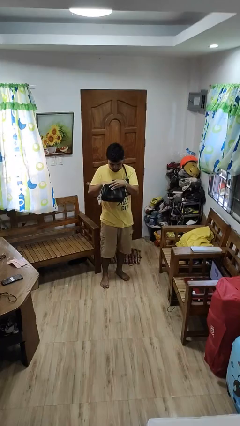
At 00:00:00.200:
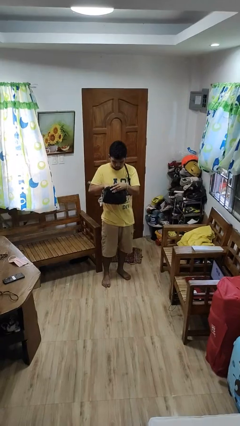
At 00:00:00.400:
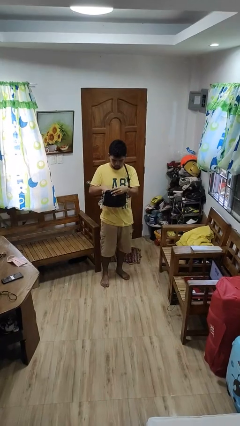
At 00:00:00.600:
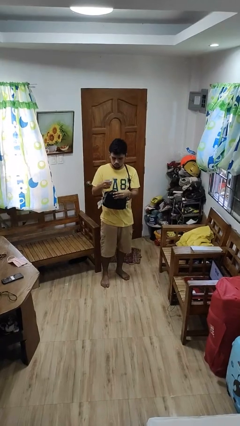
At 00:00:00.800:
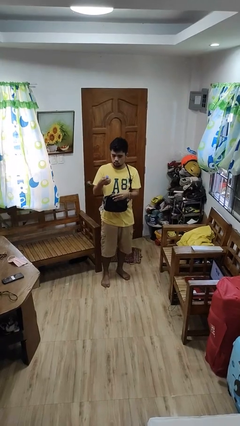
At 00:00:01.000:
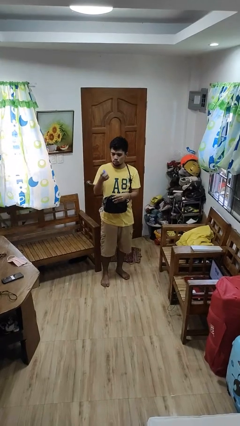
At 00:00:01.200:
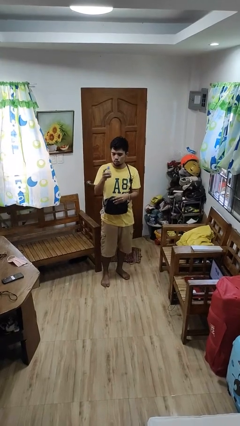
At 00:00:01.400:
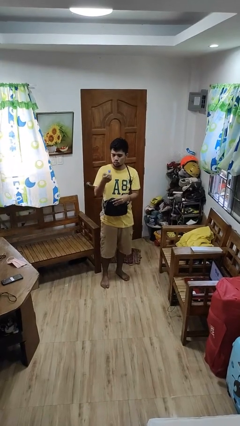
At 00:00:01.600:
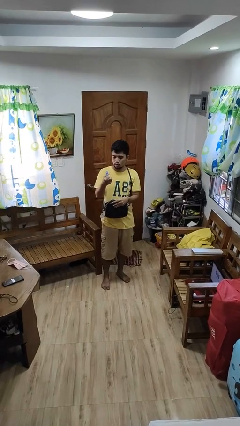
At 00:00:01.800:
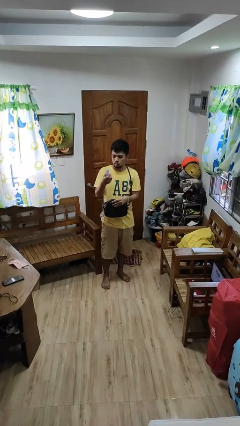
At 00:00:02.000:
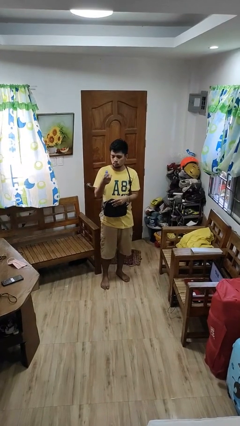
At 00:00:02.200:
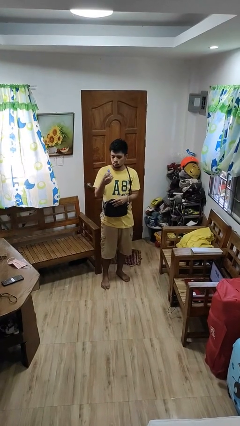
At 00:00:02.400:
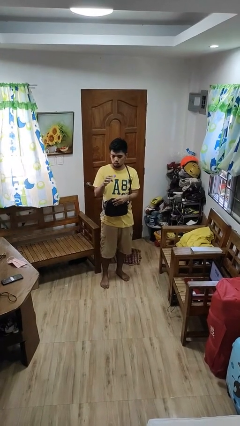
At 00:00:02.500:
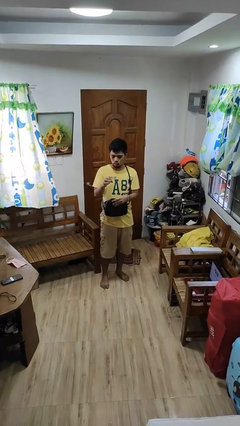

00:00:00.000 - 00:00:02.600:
person takes object from purse

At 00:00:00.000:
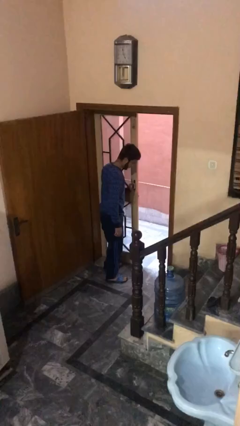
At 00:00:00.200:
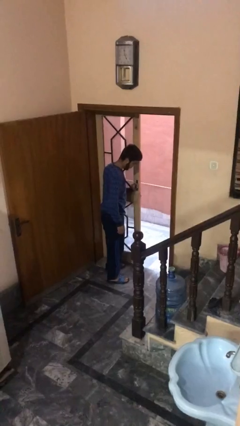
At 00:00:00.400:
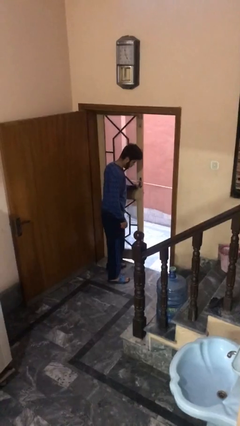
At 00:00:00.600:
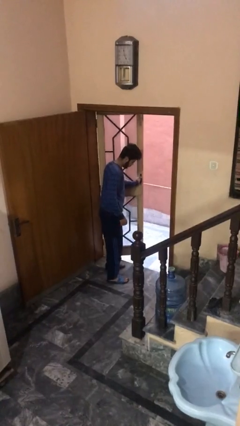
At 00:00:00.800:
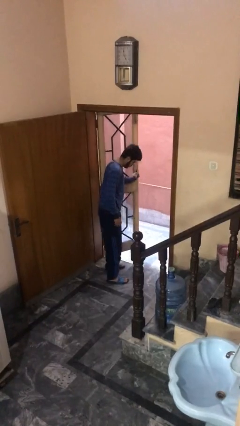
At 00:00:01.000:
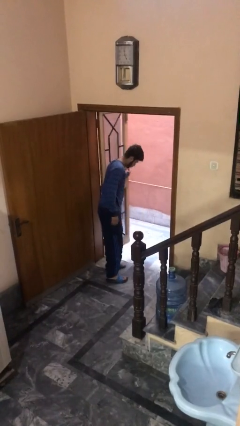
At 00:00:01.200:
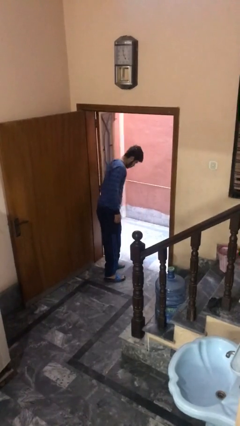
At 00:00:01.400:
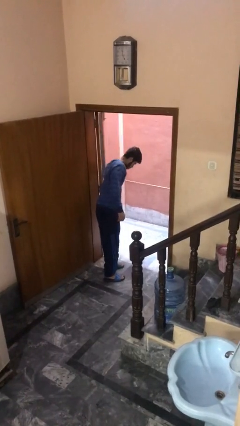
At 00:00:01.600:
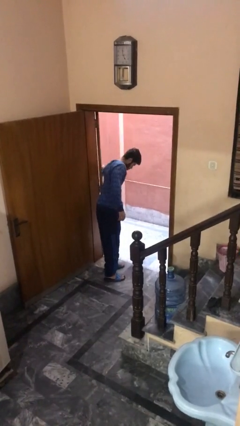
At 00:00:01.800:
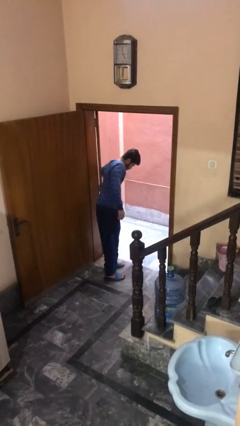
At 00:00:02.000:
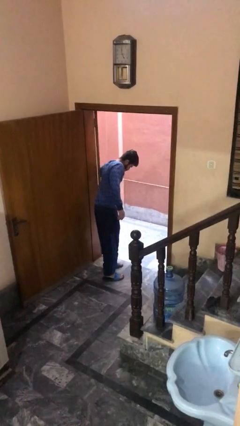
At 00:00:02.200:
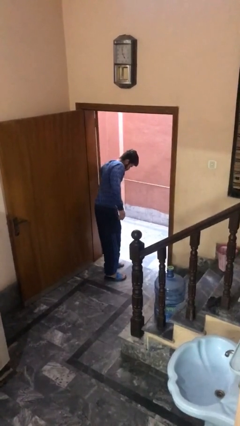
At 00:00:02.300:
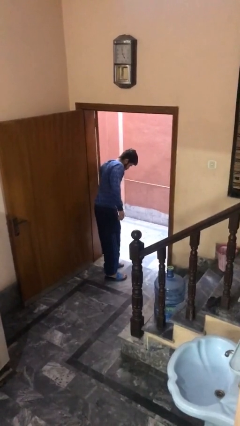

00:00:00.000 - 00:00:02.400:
person opens facility door

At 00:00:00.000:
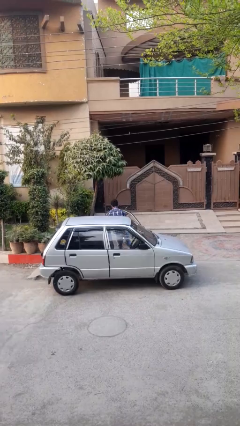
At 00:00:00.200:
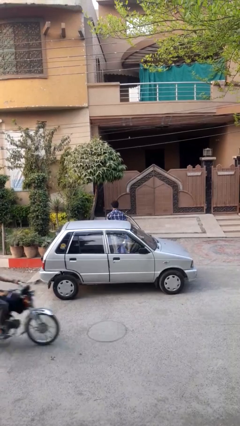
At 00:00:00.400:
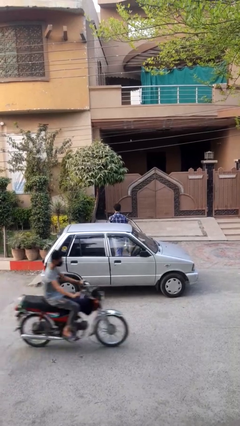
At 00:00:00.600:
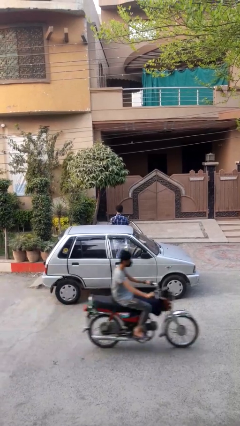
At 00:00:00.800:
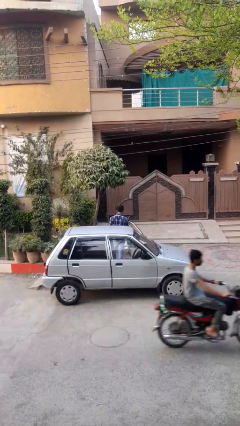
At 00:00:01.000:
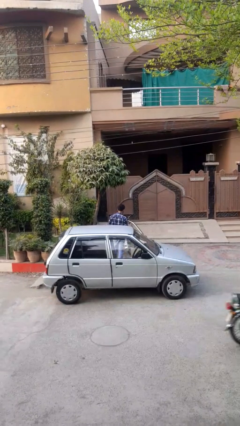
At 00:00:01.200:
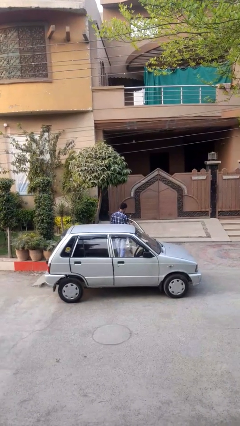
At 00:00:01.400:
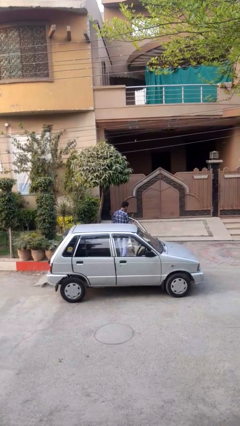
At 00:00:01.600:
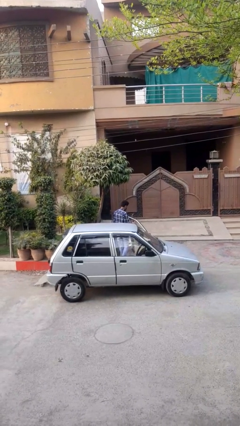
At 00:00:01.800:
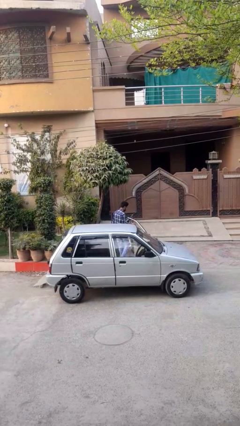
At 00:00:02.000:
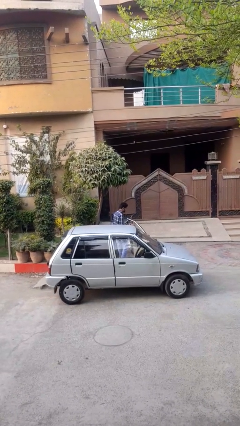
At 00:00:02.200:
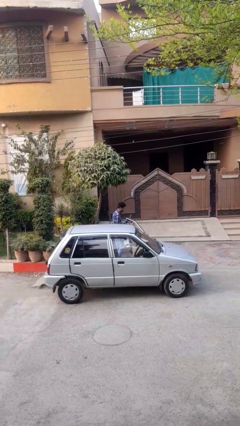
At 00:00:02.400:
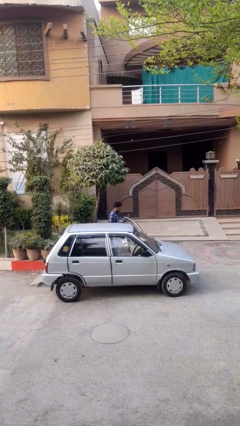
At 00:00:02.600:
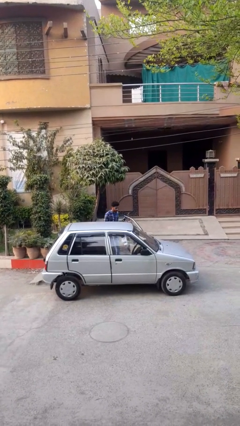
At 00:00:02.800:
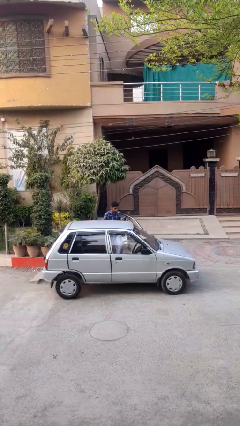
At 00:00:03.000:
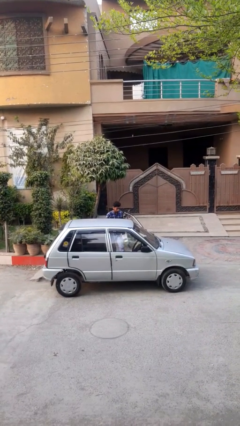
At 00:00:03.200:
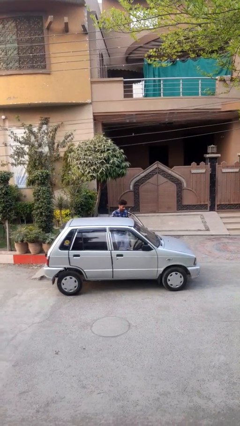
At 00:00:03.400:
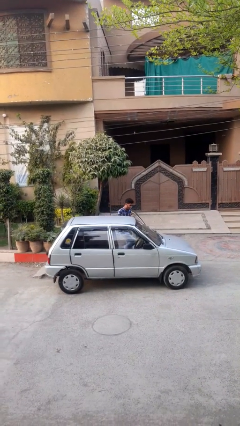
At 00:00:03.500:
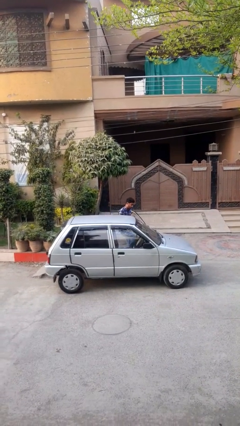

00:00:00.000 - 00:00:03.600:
person exits car

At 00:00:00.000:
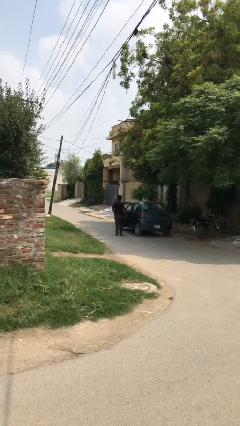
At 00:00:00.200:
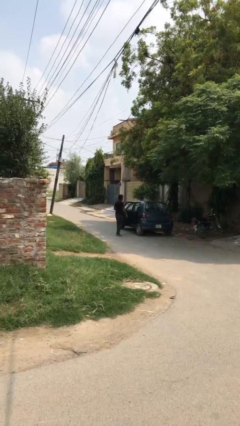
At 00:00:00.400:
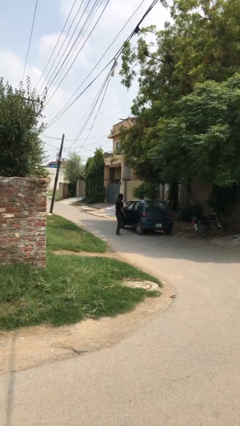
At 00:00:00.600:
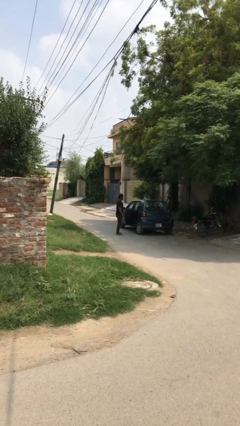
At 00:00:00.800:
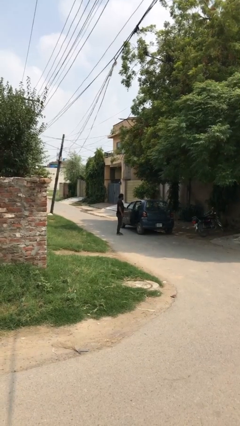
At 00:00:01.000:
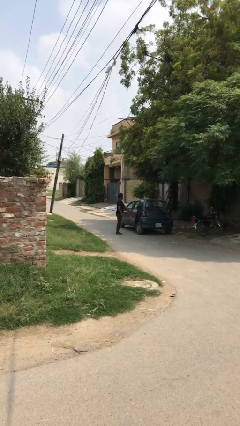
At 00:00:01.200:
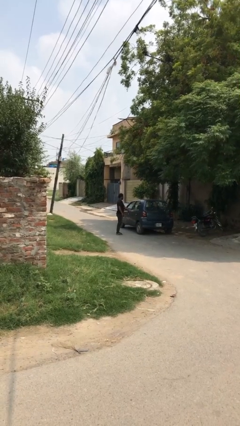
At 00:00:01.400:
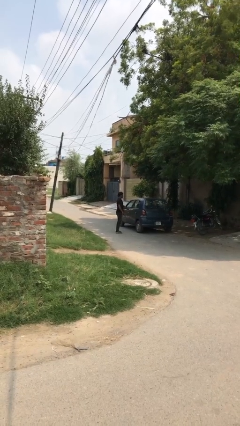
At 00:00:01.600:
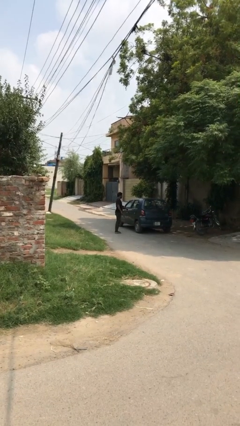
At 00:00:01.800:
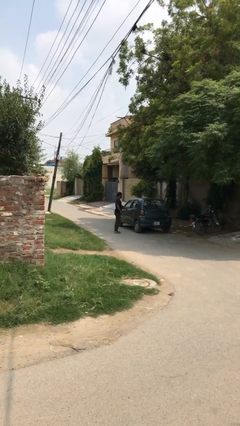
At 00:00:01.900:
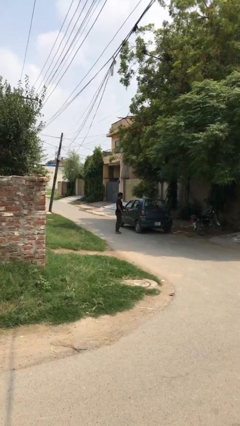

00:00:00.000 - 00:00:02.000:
person closes car door

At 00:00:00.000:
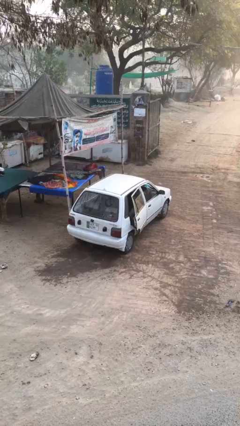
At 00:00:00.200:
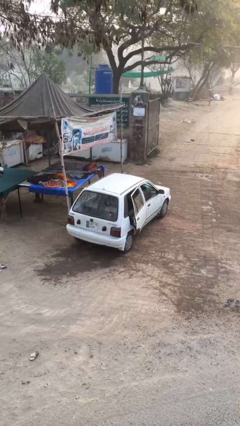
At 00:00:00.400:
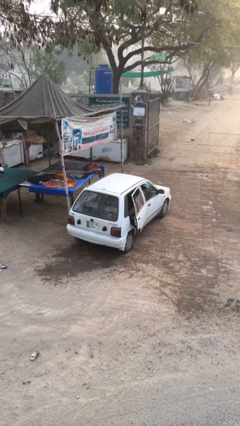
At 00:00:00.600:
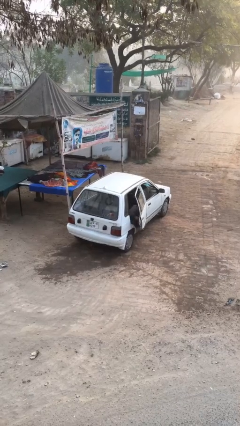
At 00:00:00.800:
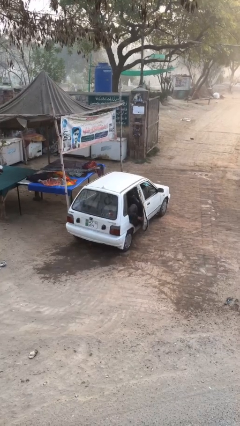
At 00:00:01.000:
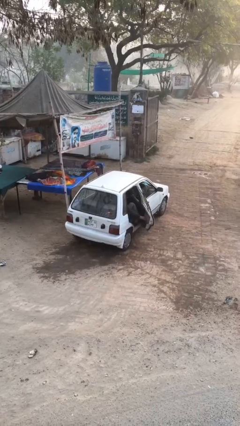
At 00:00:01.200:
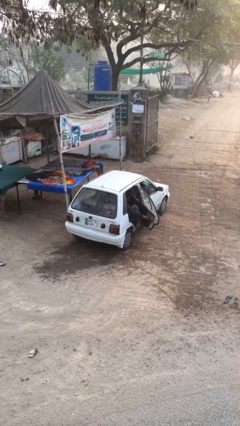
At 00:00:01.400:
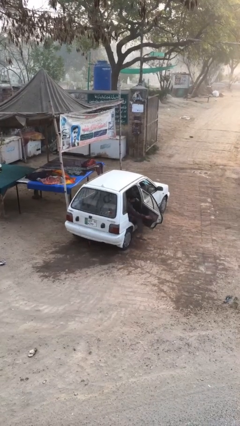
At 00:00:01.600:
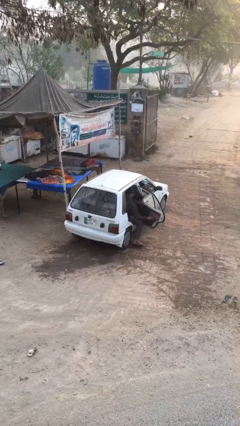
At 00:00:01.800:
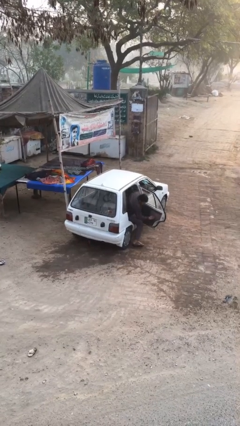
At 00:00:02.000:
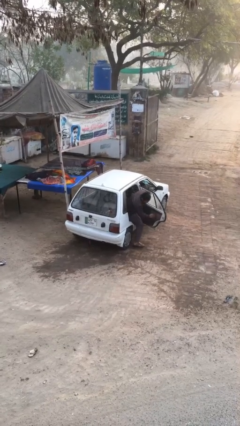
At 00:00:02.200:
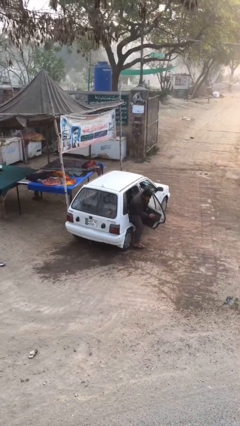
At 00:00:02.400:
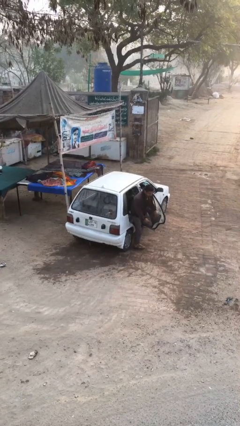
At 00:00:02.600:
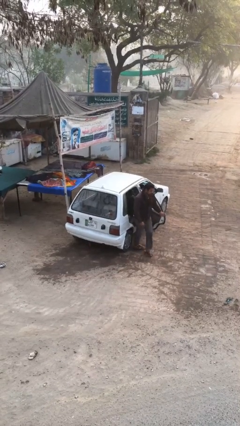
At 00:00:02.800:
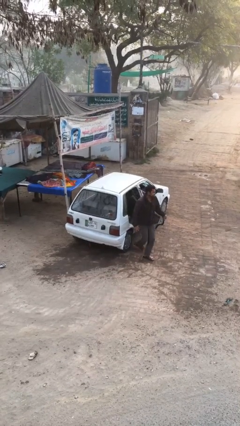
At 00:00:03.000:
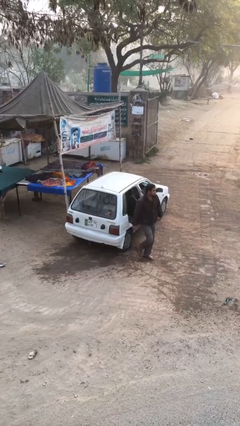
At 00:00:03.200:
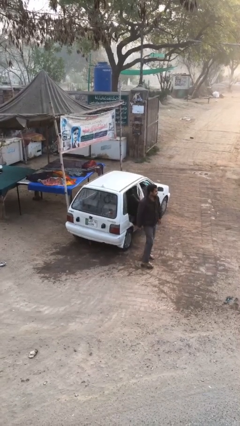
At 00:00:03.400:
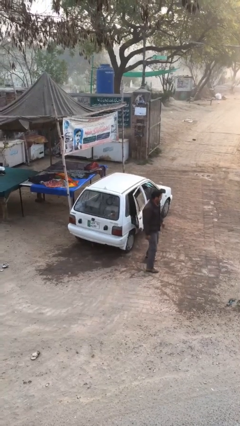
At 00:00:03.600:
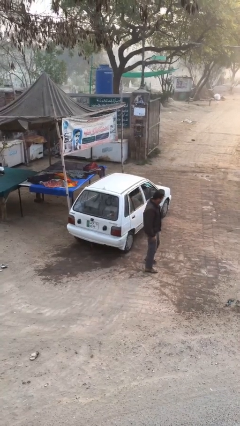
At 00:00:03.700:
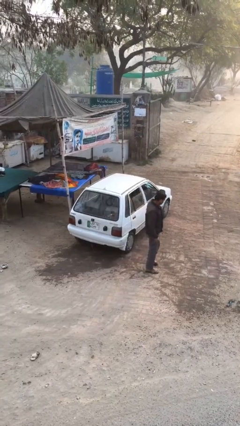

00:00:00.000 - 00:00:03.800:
car drops off person

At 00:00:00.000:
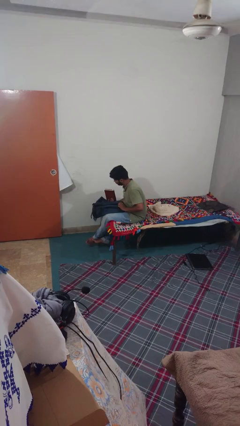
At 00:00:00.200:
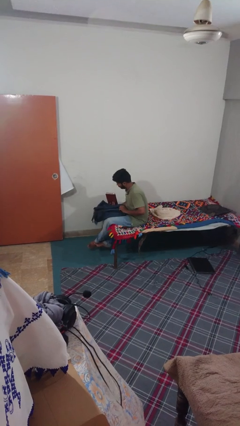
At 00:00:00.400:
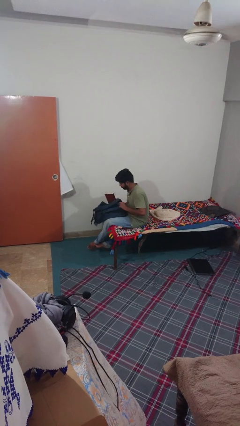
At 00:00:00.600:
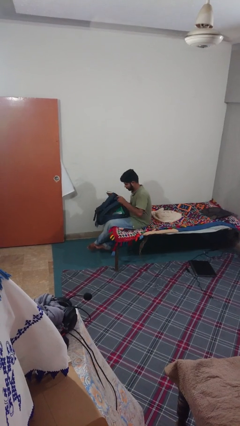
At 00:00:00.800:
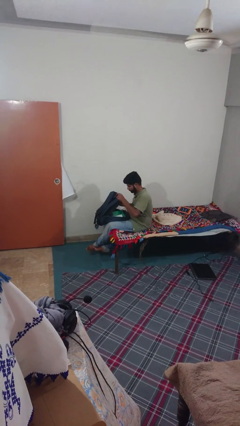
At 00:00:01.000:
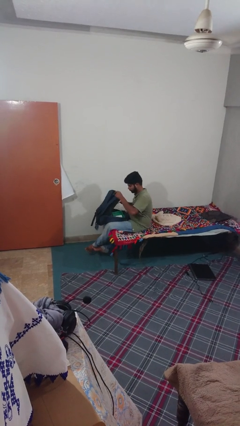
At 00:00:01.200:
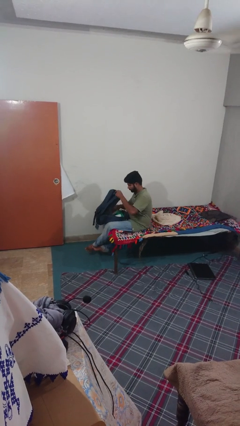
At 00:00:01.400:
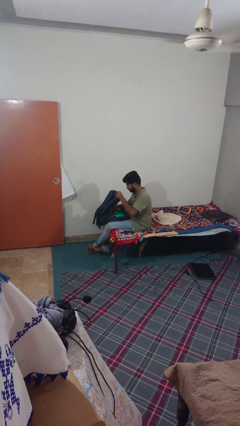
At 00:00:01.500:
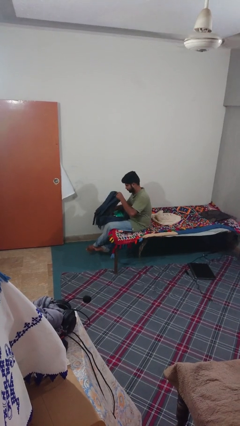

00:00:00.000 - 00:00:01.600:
person puts object into backpack

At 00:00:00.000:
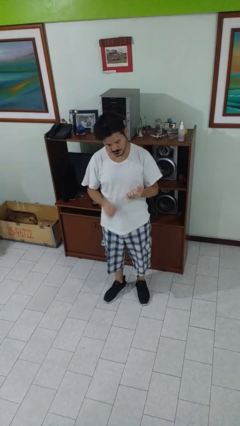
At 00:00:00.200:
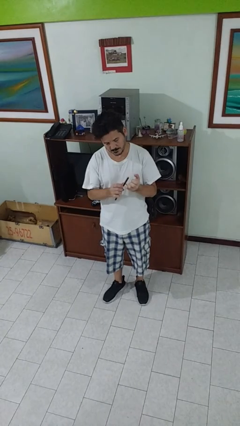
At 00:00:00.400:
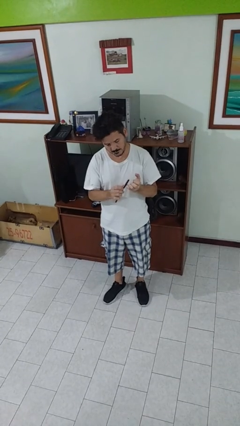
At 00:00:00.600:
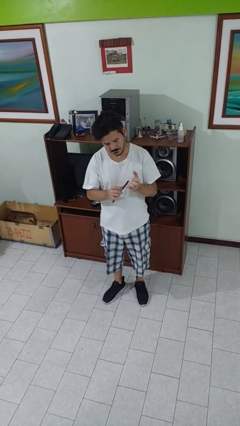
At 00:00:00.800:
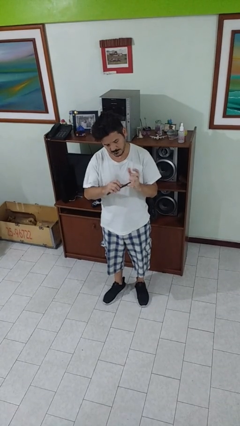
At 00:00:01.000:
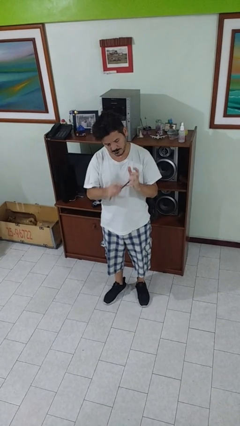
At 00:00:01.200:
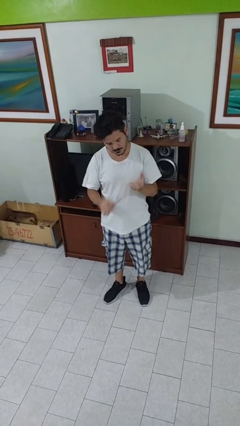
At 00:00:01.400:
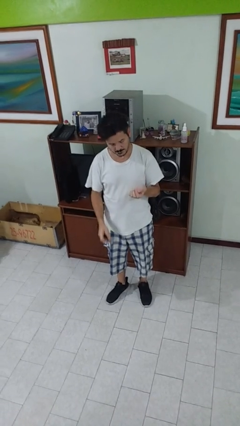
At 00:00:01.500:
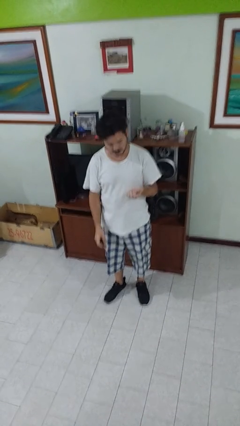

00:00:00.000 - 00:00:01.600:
person files fingernails
